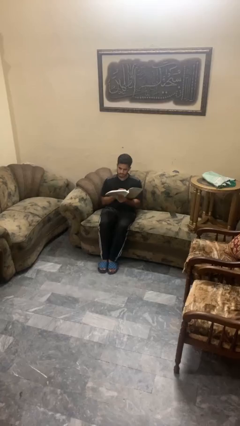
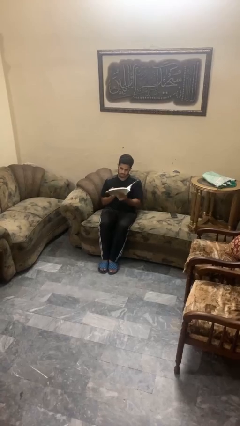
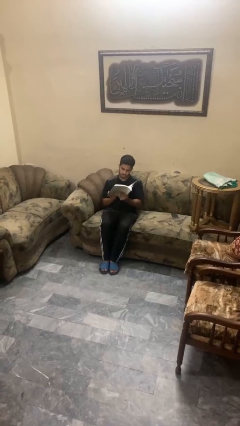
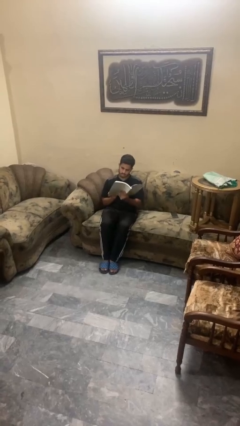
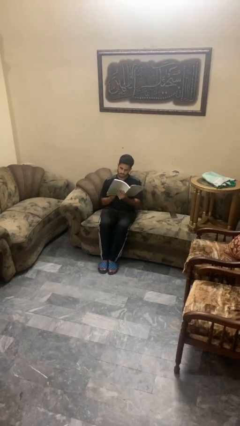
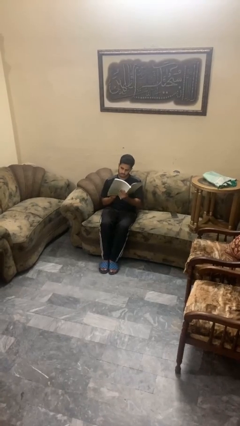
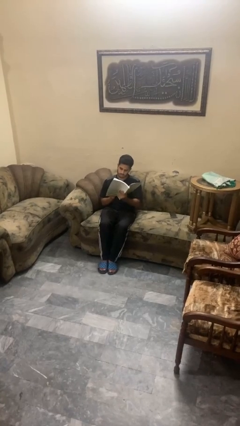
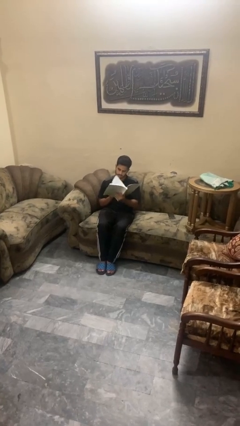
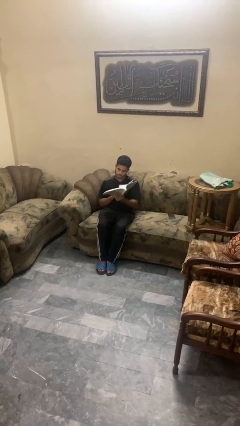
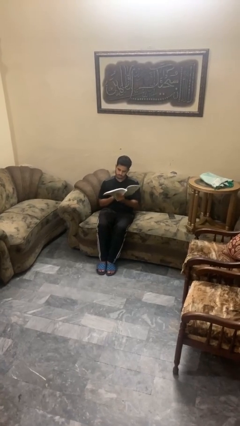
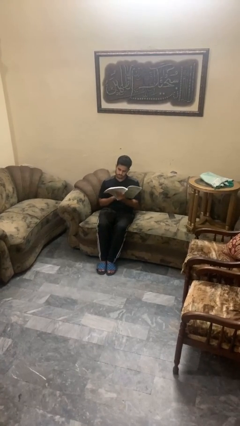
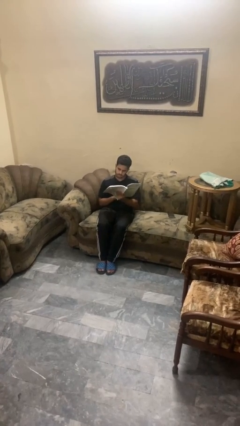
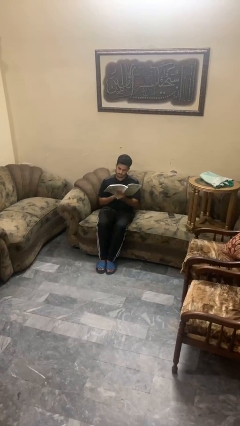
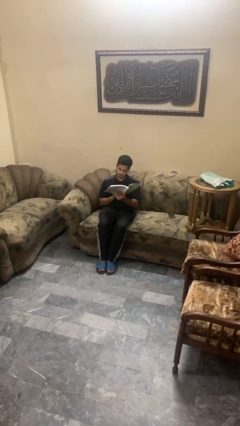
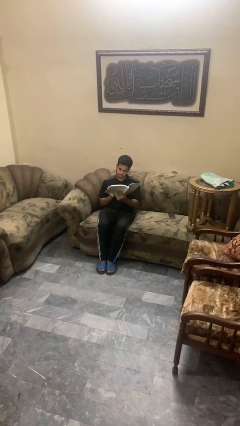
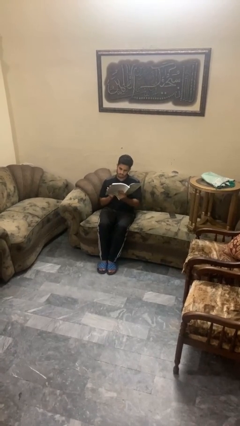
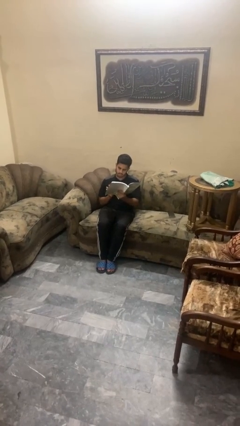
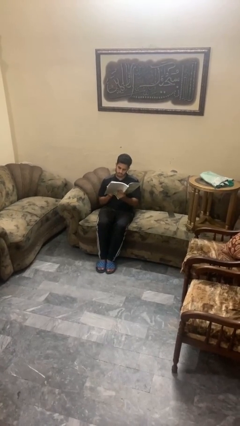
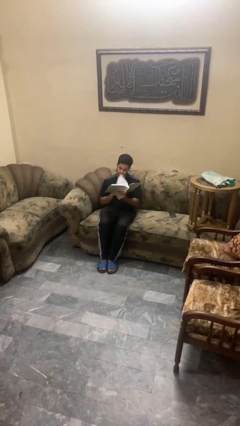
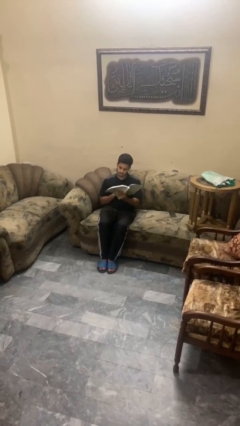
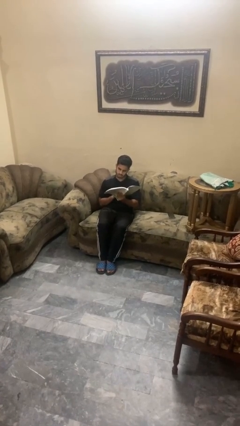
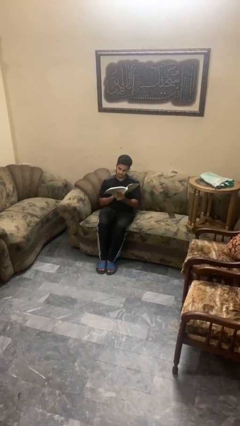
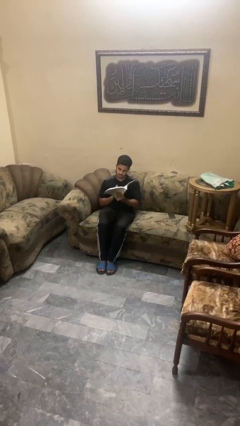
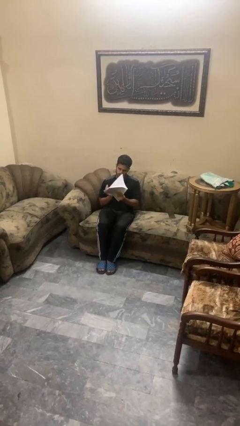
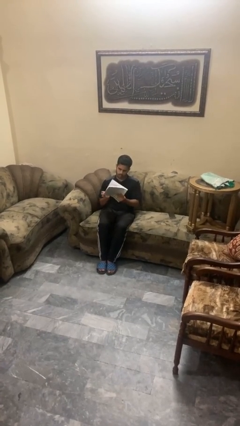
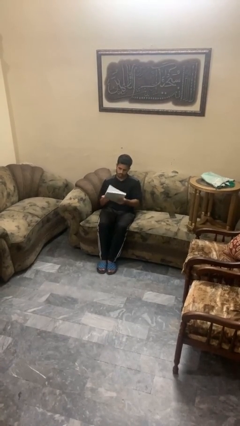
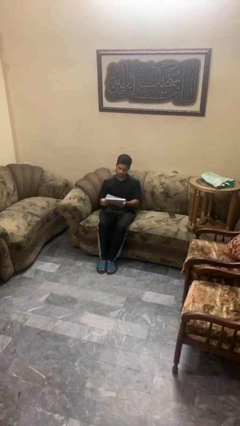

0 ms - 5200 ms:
person reads book

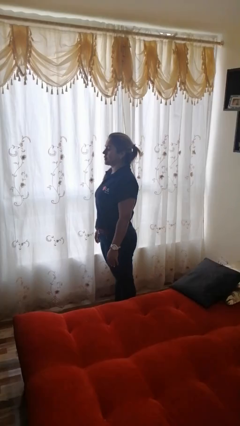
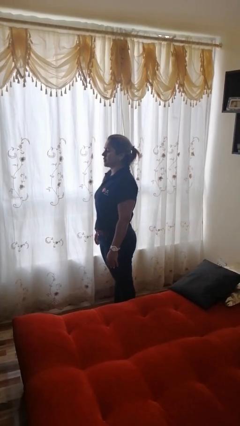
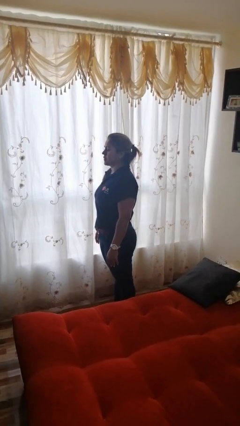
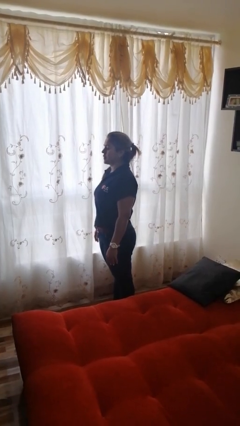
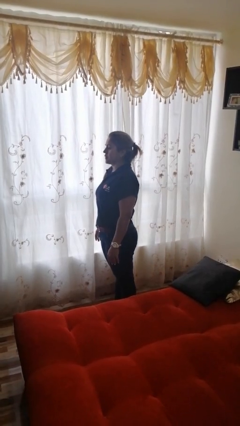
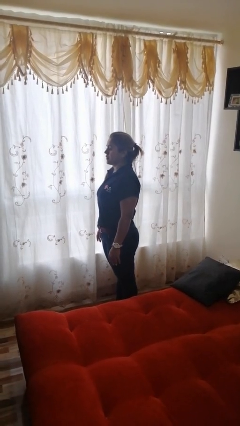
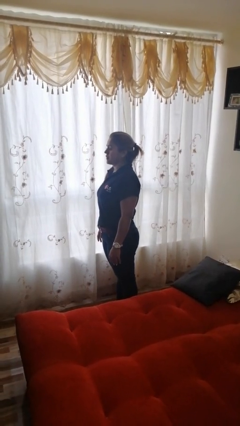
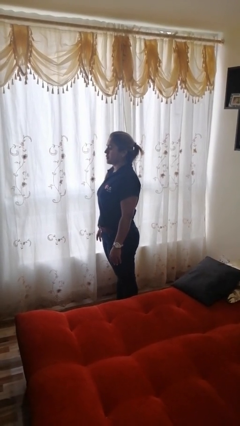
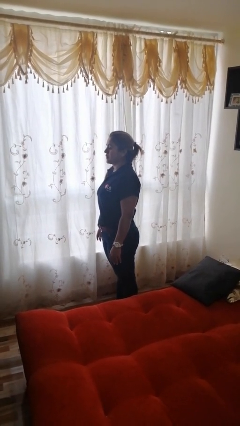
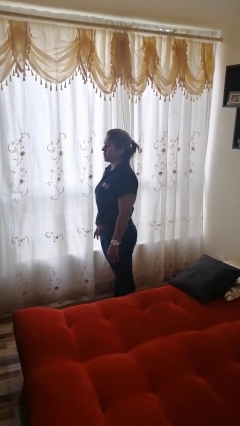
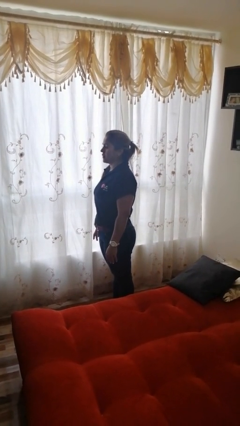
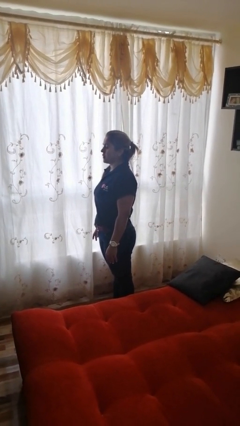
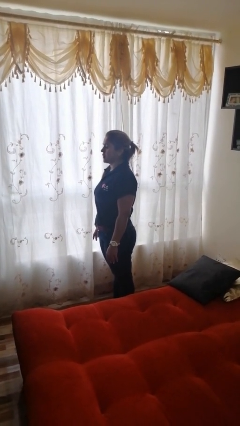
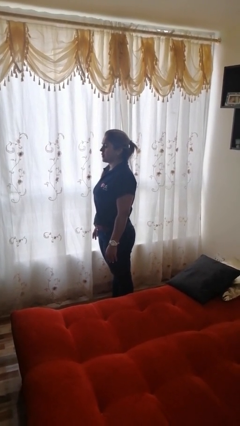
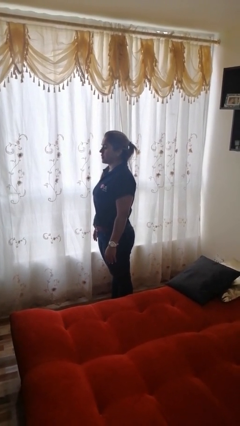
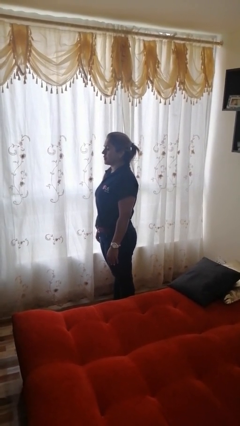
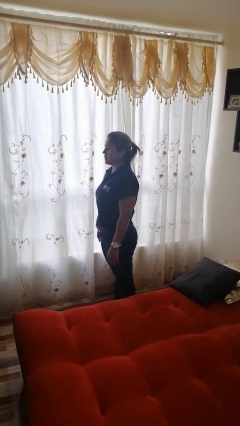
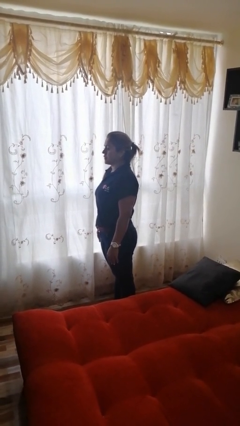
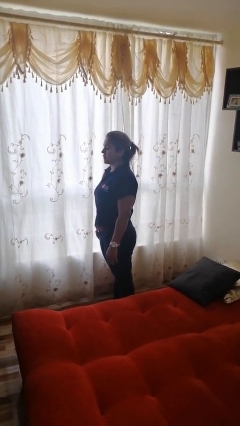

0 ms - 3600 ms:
person stands up

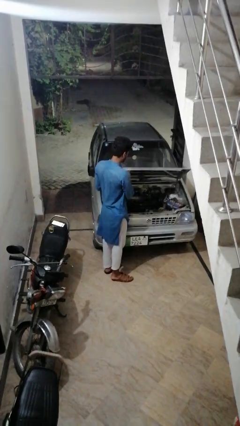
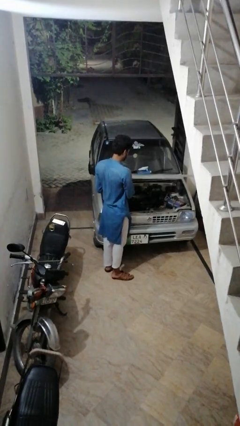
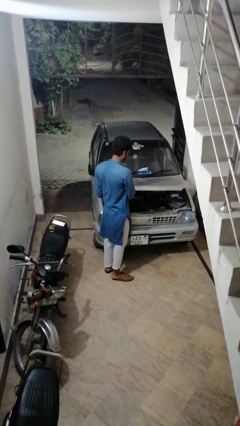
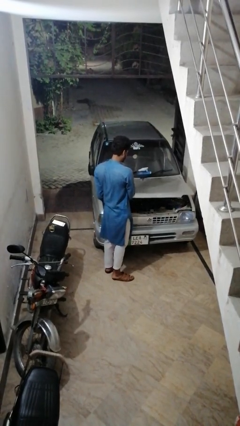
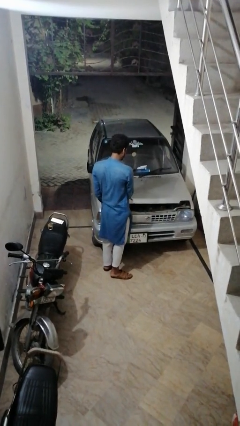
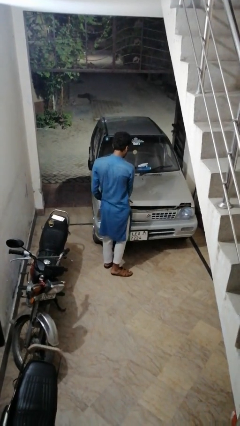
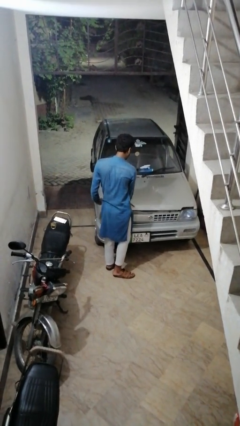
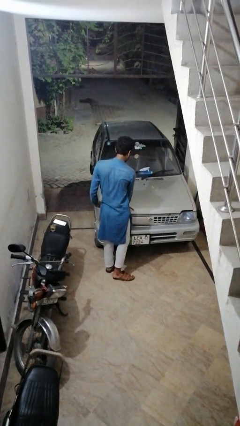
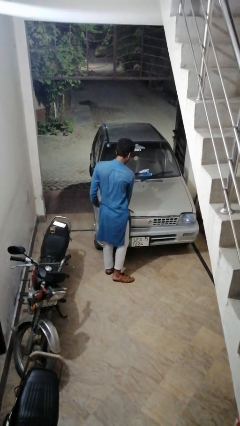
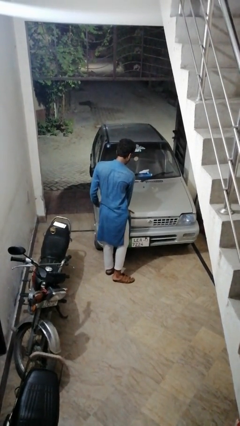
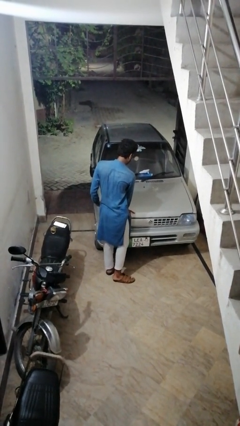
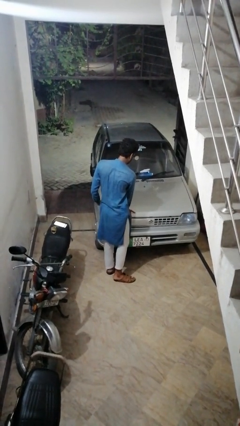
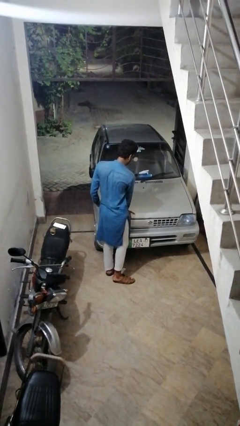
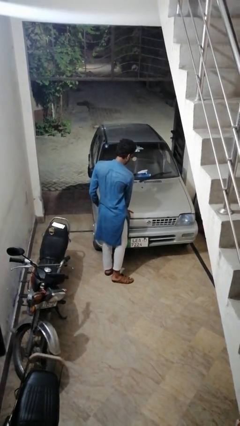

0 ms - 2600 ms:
person closes car hood

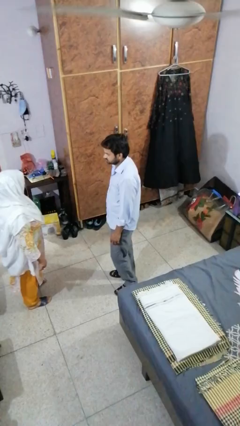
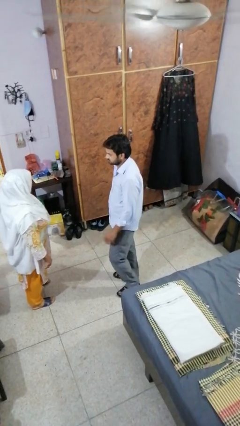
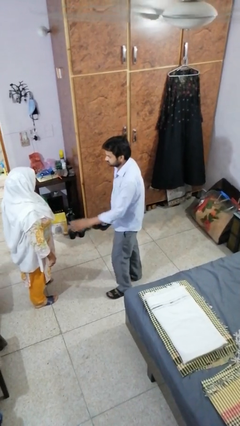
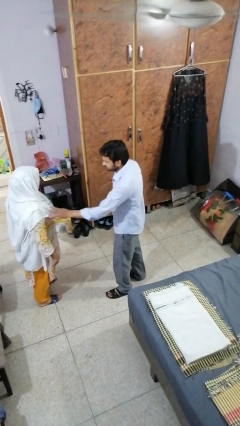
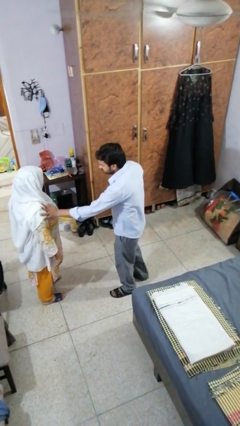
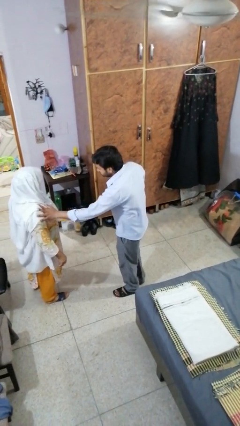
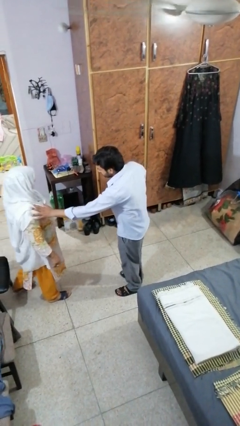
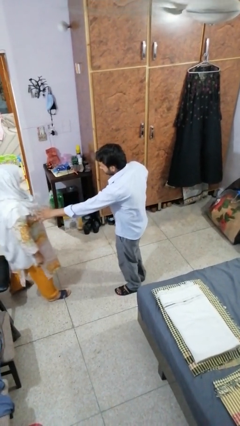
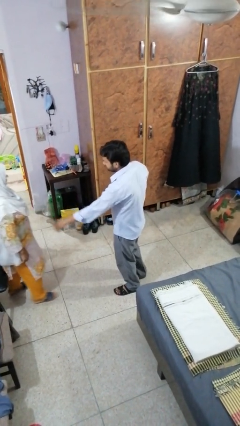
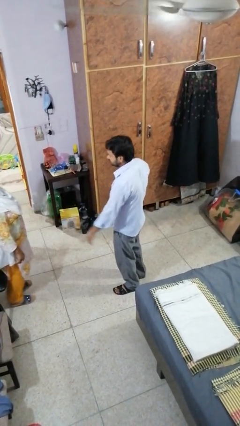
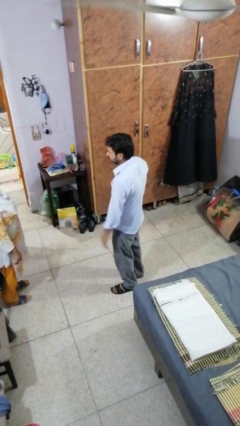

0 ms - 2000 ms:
person shoves person

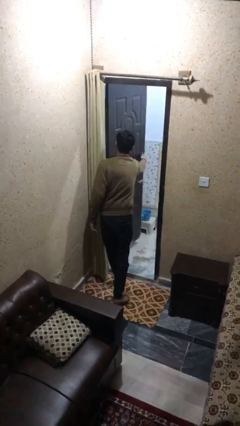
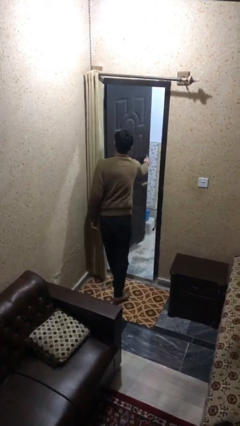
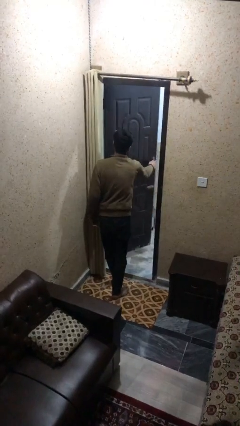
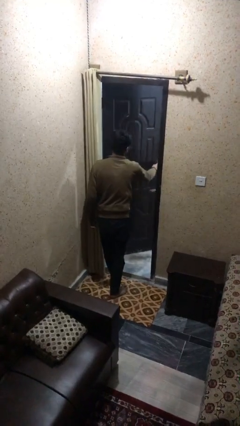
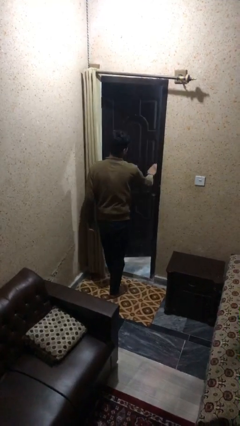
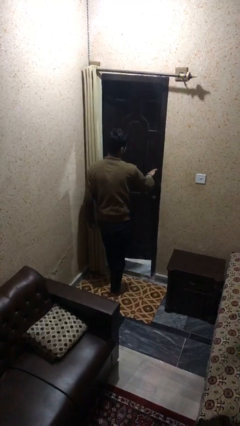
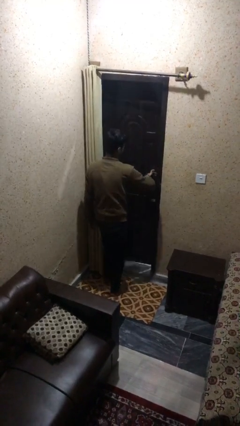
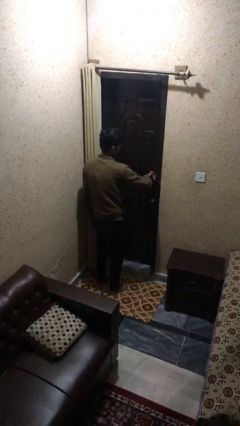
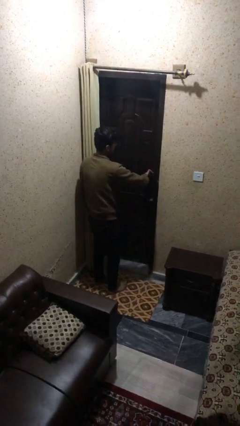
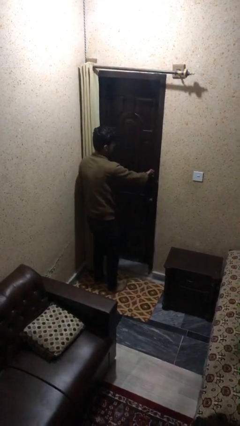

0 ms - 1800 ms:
person closes facility door

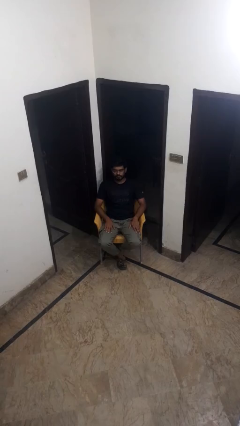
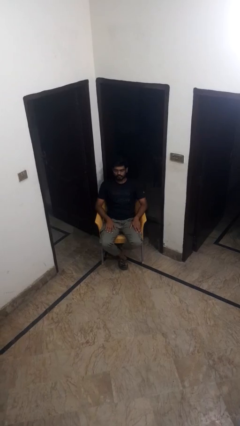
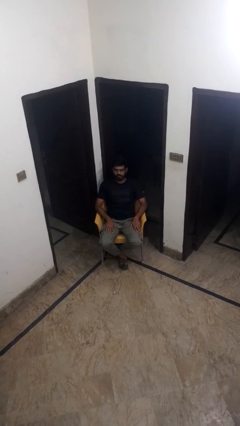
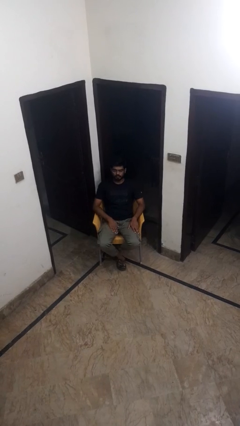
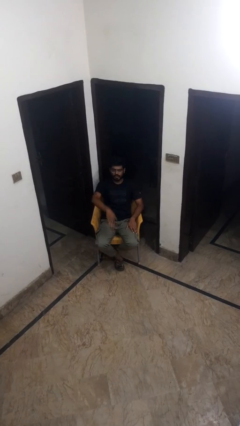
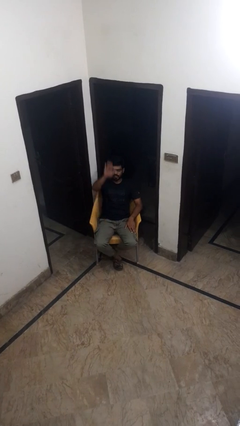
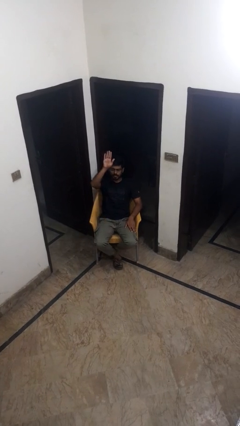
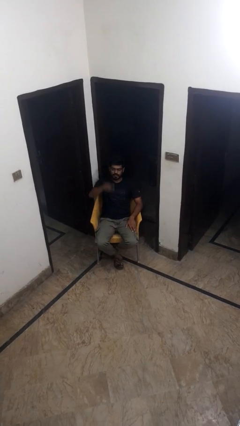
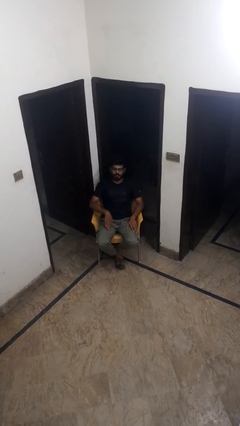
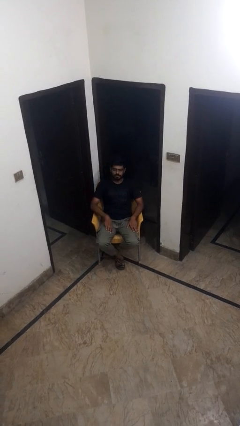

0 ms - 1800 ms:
person gestures swipe up

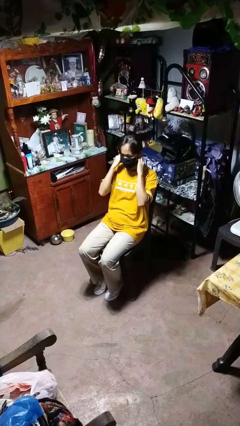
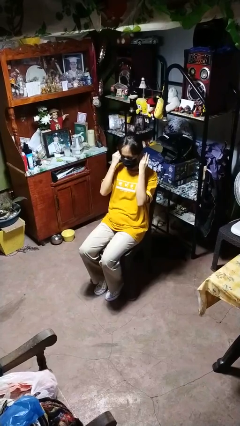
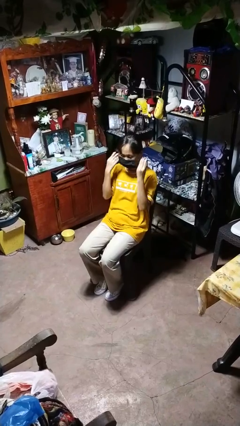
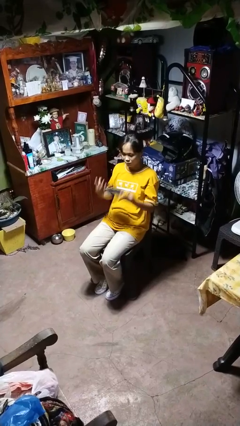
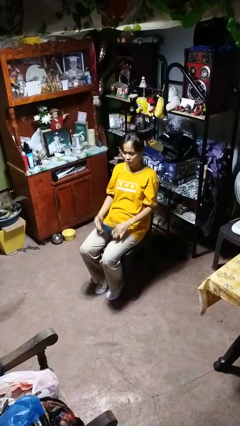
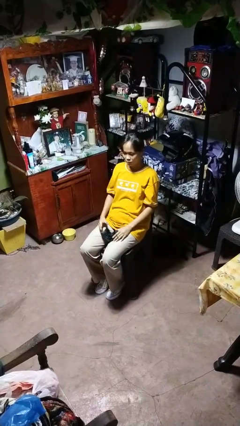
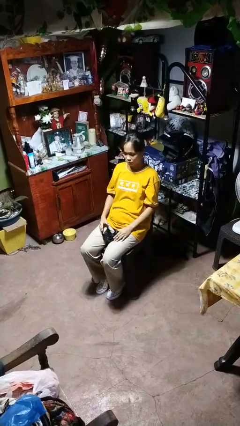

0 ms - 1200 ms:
person takes off facemask
